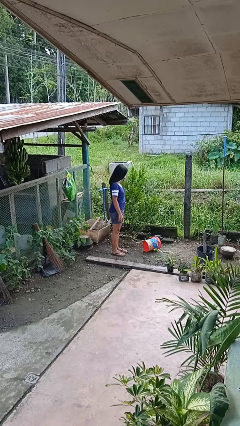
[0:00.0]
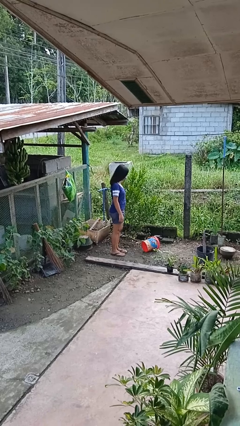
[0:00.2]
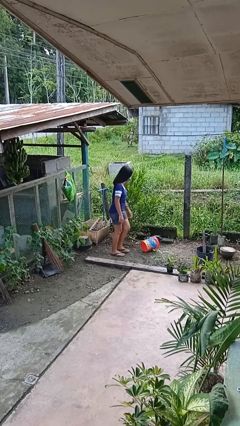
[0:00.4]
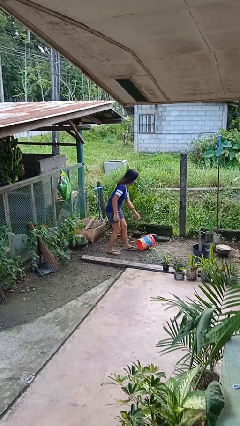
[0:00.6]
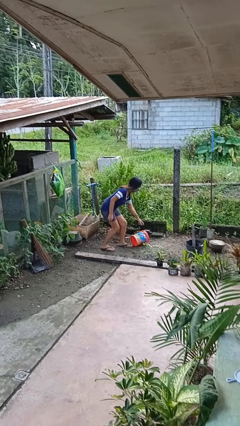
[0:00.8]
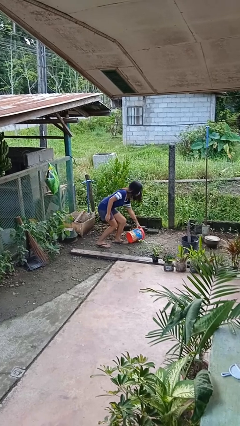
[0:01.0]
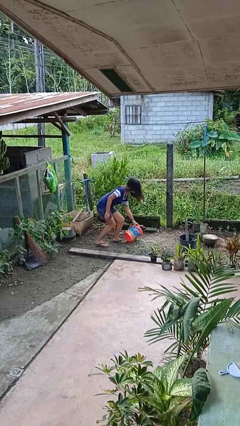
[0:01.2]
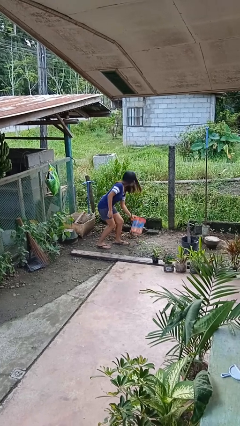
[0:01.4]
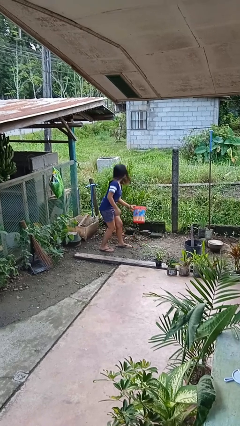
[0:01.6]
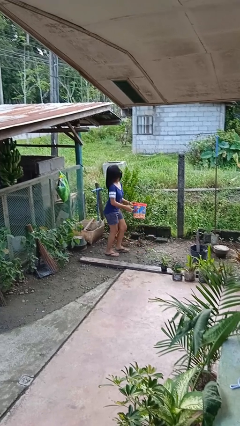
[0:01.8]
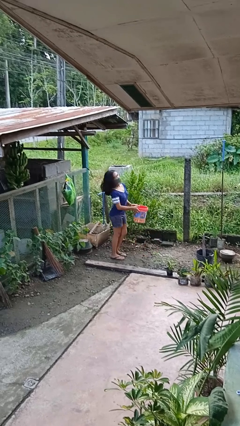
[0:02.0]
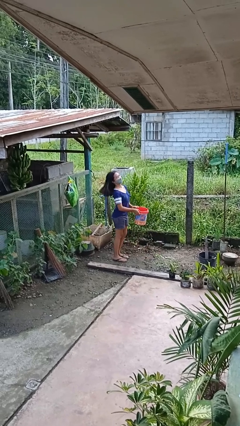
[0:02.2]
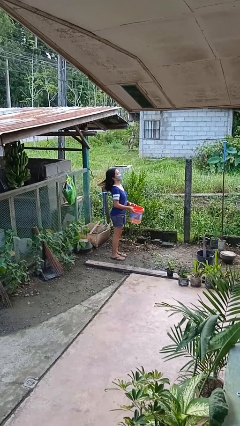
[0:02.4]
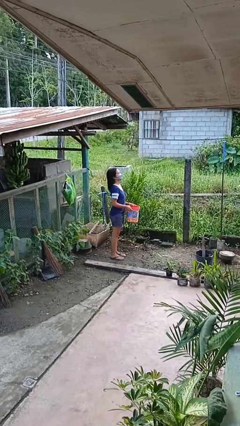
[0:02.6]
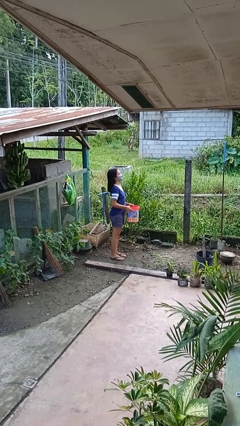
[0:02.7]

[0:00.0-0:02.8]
person picks up object from floor

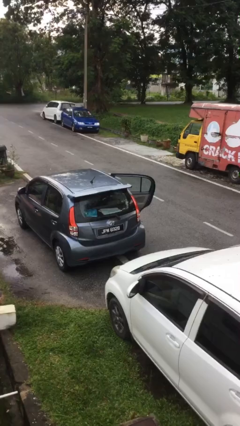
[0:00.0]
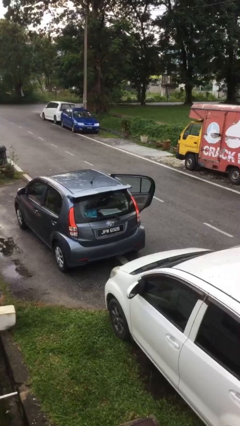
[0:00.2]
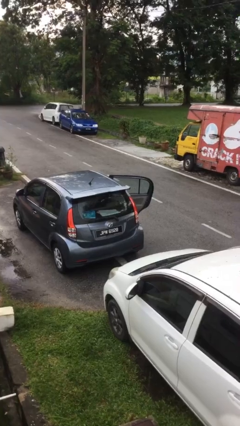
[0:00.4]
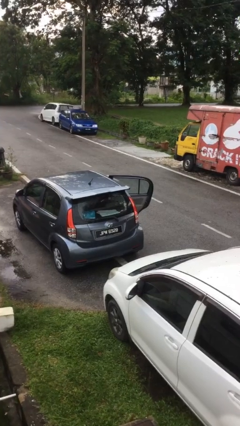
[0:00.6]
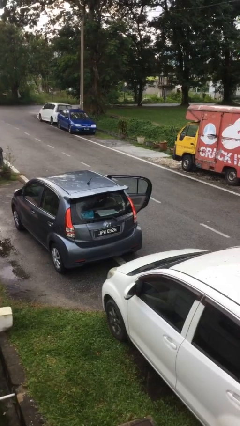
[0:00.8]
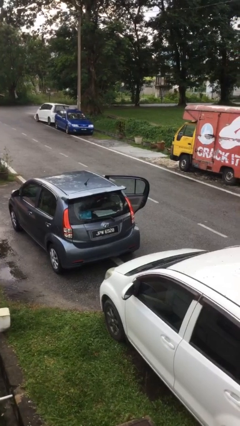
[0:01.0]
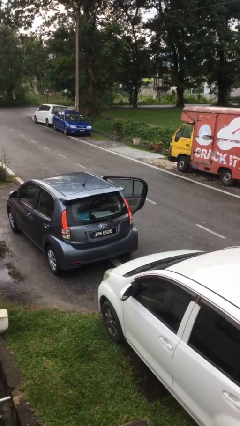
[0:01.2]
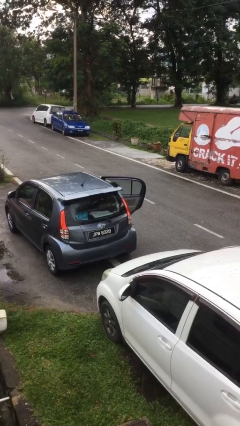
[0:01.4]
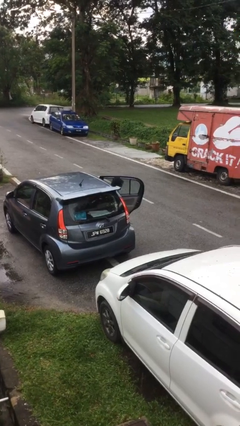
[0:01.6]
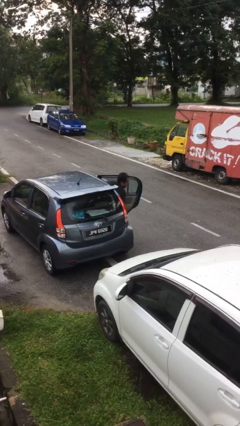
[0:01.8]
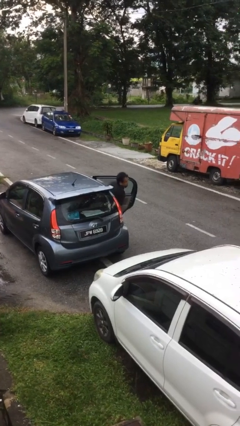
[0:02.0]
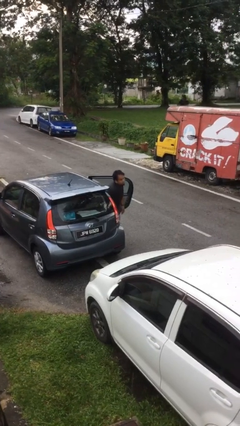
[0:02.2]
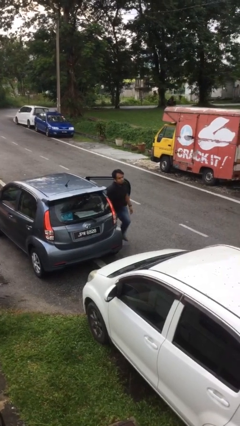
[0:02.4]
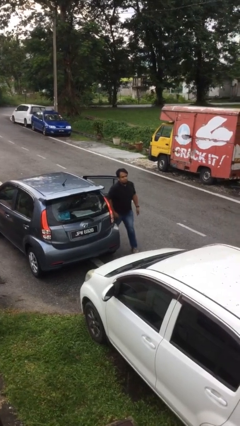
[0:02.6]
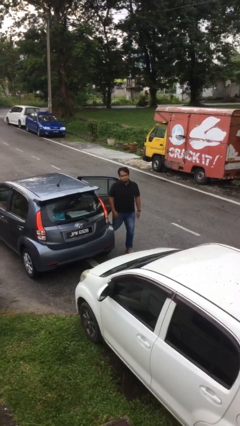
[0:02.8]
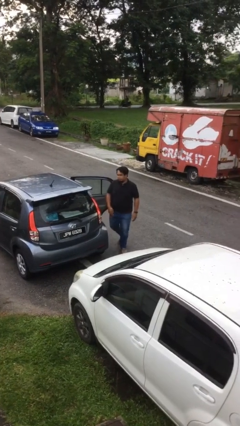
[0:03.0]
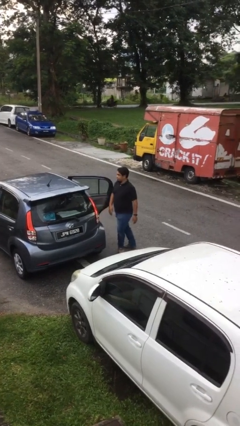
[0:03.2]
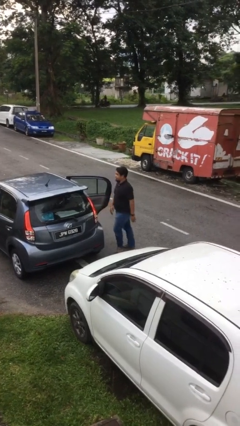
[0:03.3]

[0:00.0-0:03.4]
person exits car

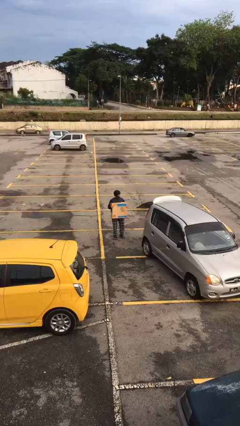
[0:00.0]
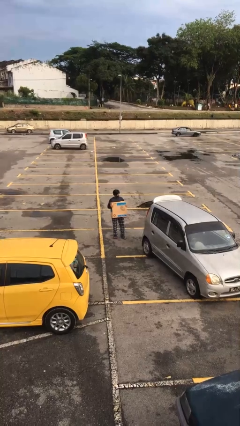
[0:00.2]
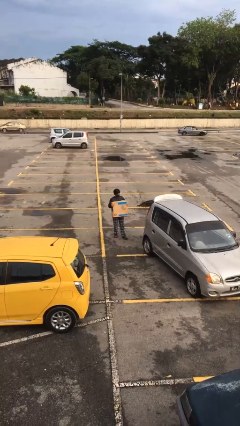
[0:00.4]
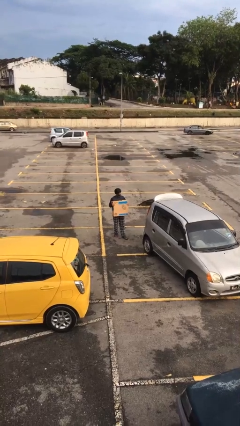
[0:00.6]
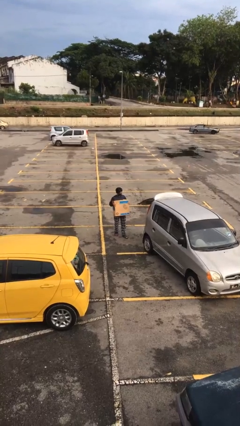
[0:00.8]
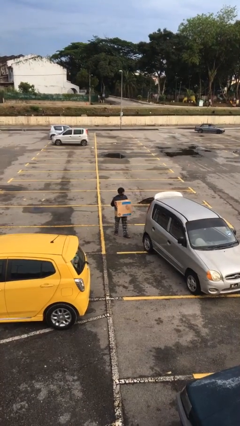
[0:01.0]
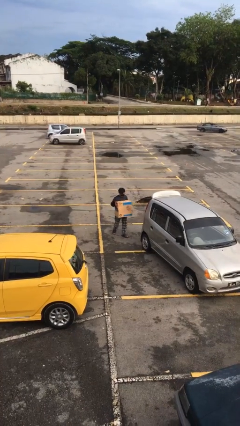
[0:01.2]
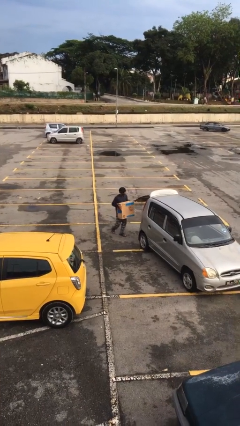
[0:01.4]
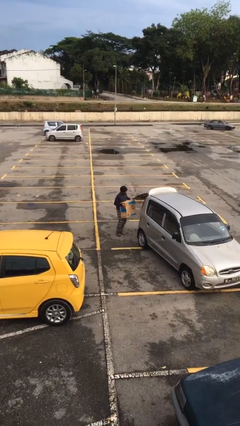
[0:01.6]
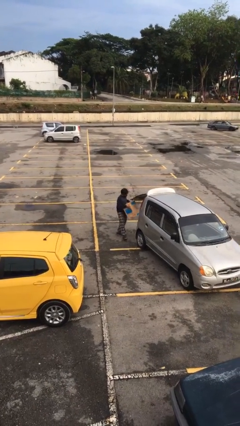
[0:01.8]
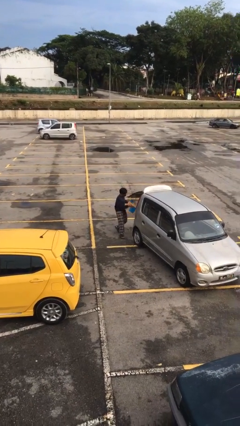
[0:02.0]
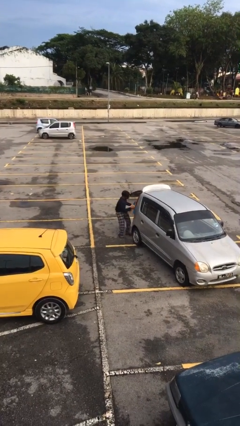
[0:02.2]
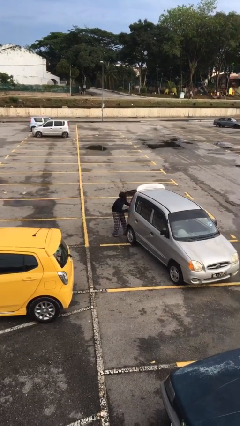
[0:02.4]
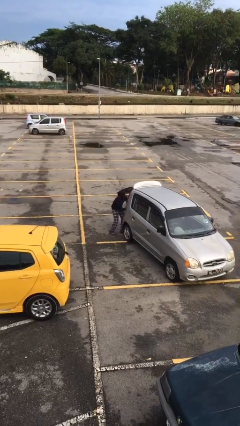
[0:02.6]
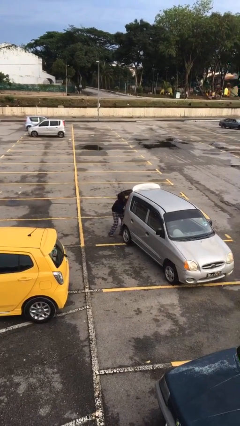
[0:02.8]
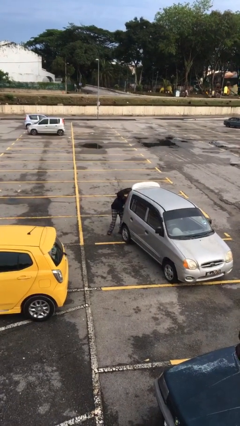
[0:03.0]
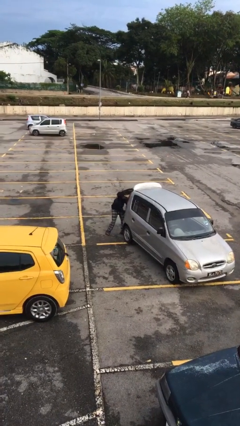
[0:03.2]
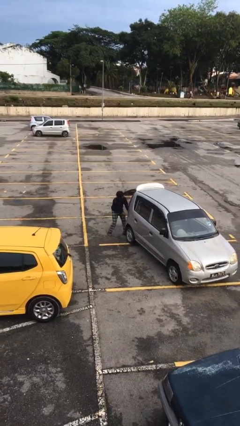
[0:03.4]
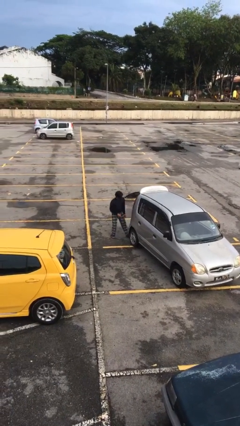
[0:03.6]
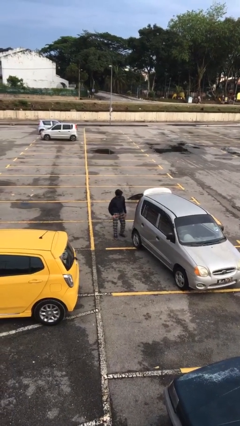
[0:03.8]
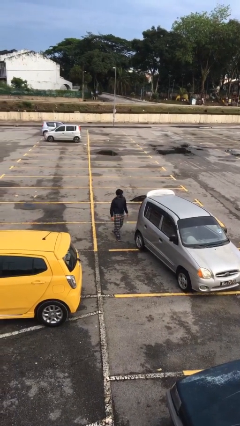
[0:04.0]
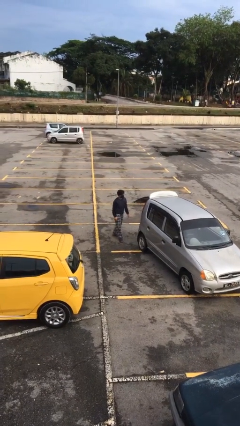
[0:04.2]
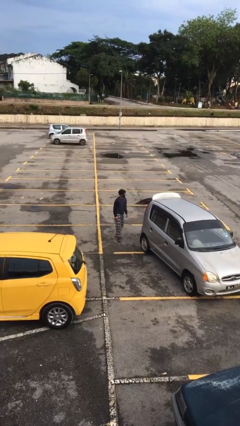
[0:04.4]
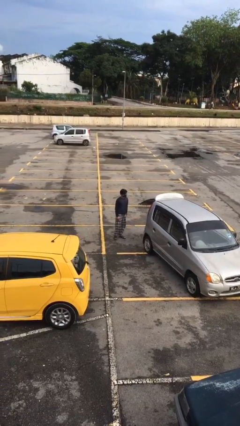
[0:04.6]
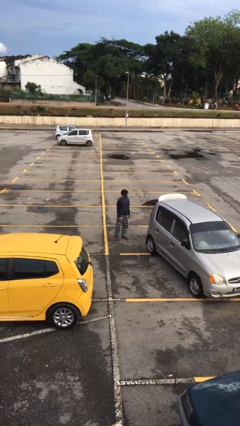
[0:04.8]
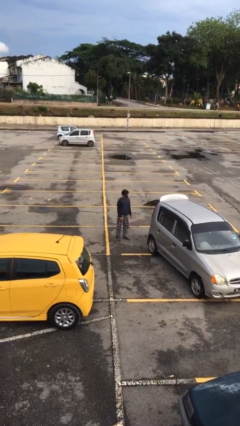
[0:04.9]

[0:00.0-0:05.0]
person loads car

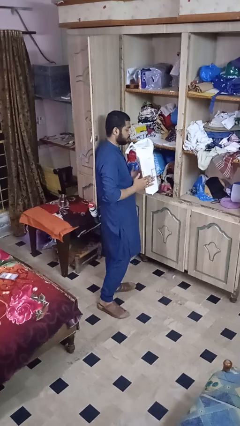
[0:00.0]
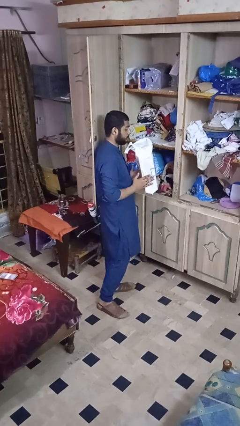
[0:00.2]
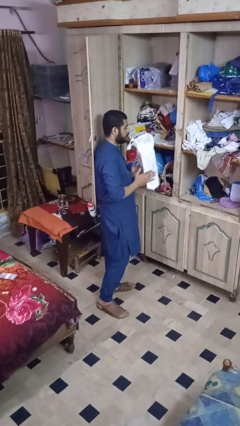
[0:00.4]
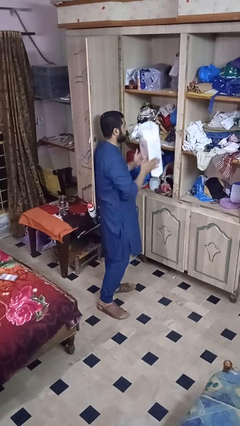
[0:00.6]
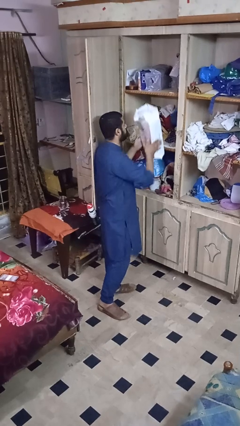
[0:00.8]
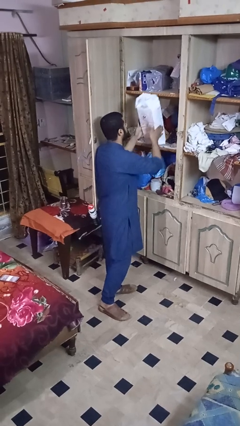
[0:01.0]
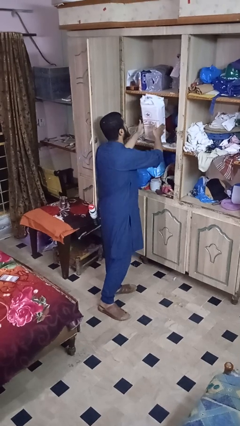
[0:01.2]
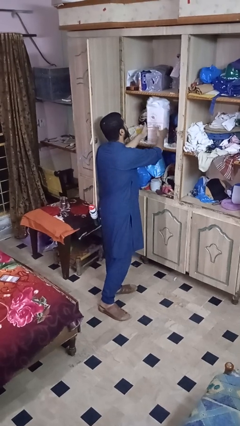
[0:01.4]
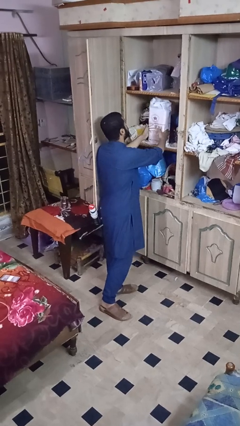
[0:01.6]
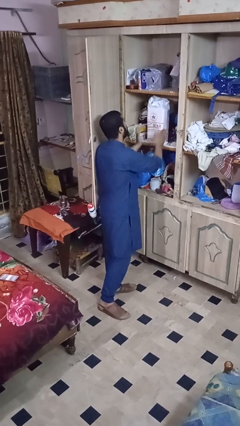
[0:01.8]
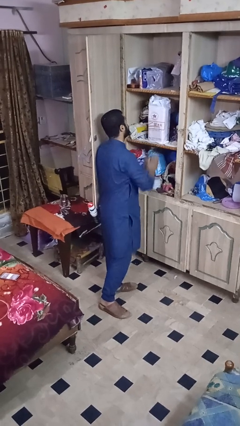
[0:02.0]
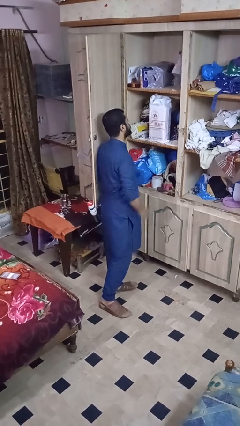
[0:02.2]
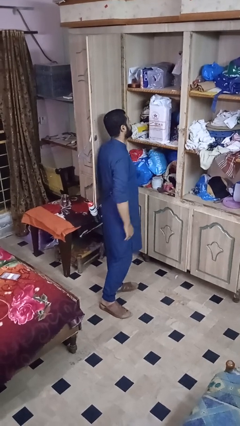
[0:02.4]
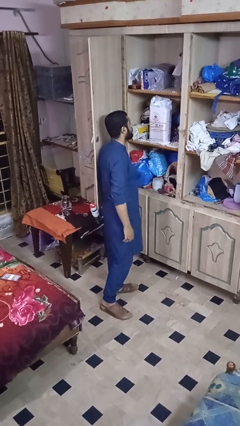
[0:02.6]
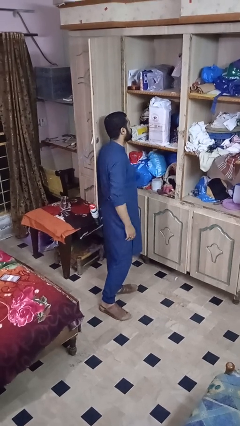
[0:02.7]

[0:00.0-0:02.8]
person puts down object into cabinet

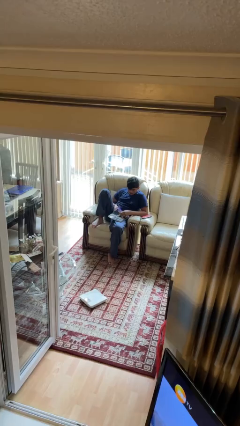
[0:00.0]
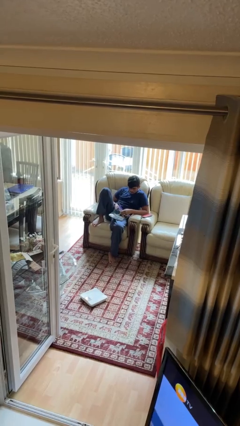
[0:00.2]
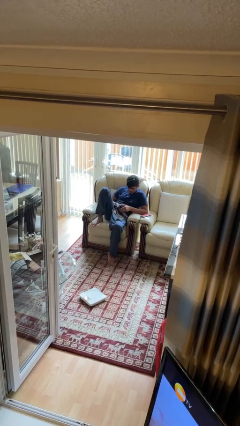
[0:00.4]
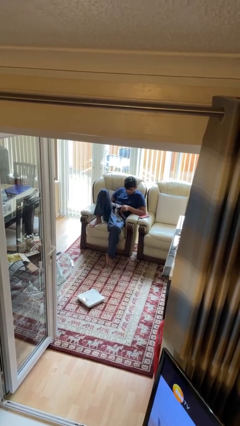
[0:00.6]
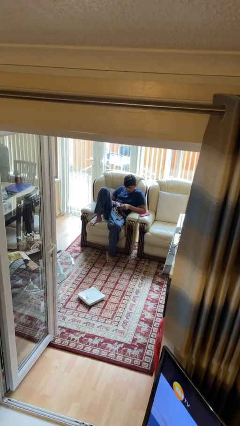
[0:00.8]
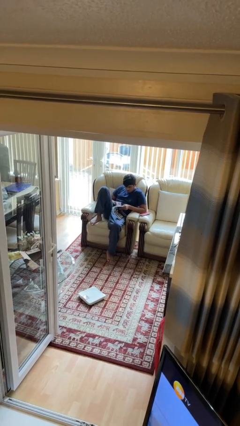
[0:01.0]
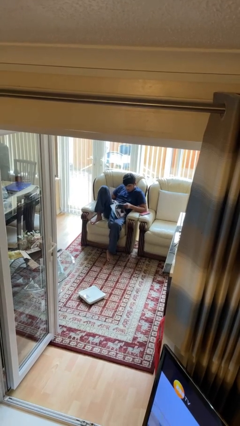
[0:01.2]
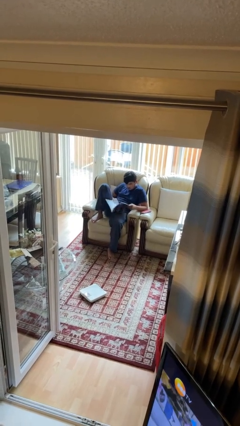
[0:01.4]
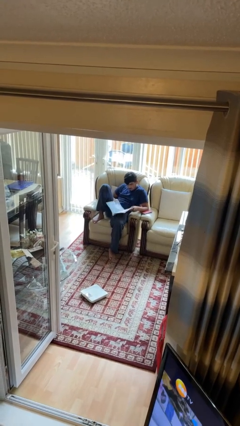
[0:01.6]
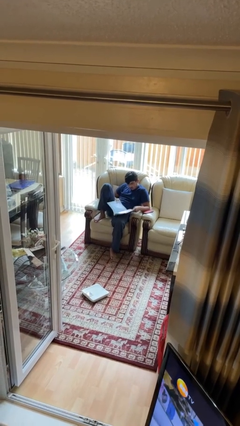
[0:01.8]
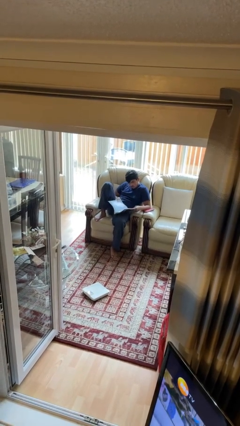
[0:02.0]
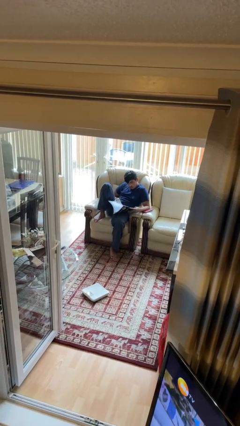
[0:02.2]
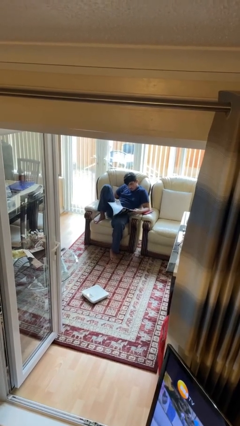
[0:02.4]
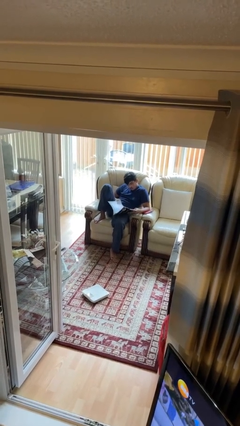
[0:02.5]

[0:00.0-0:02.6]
person reads magazine

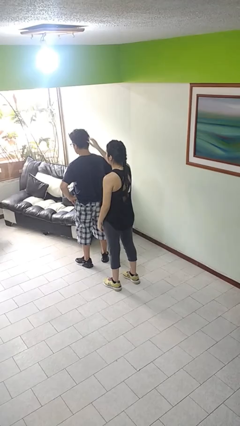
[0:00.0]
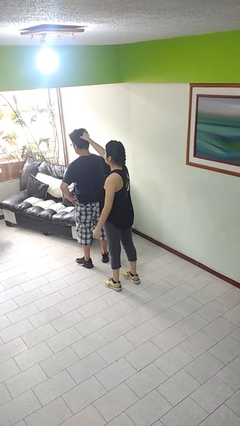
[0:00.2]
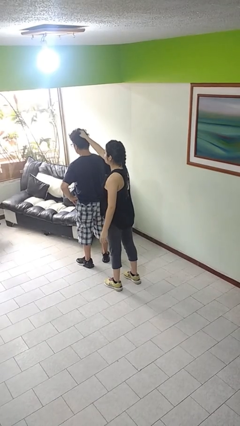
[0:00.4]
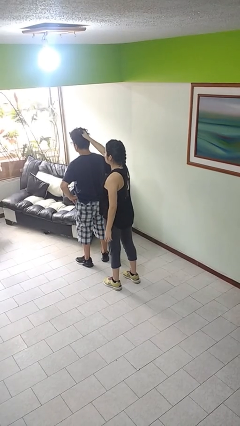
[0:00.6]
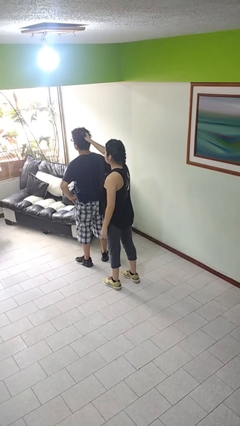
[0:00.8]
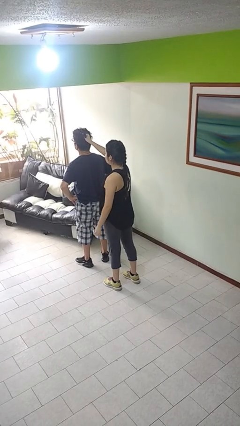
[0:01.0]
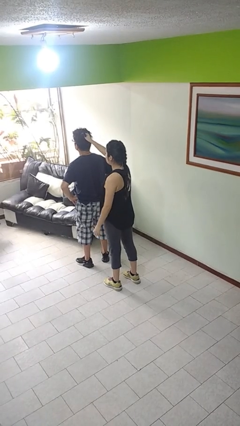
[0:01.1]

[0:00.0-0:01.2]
person grabs person by hair
